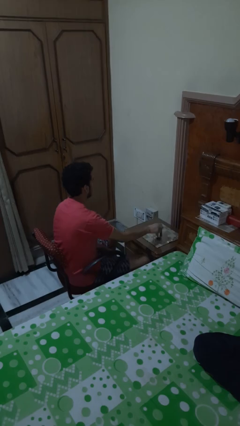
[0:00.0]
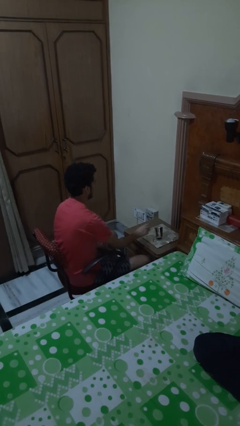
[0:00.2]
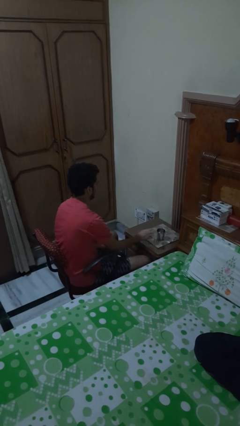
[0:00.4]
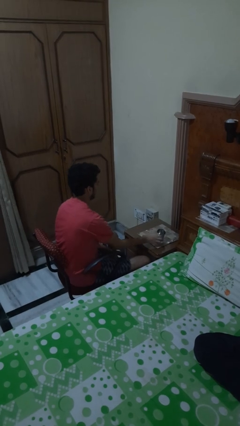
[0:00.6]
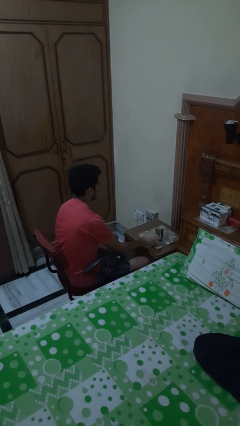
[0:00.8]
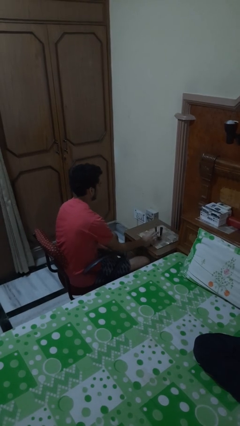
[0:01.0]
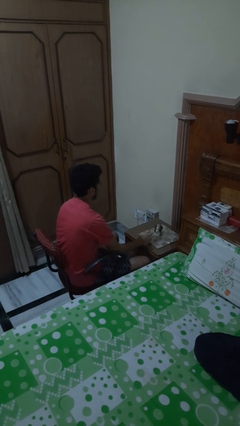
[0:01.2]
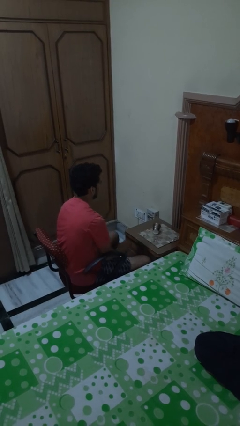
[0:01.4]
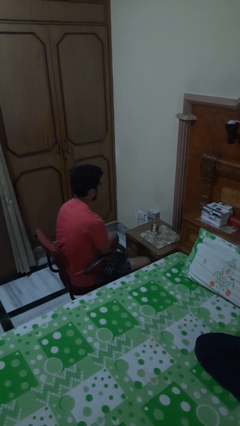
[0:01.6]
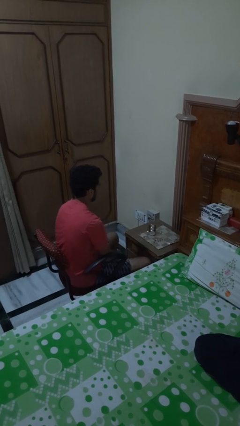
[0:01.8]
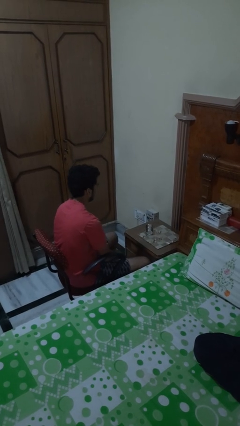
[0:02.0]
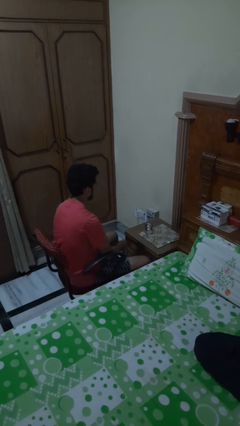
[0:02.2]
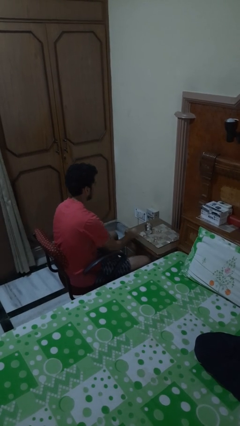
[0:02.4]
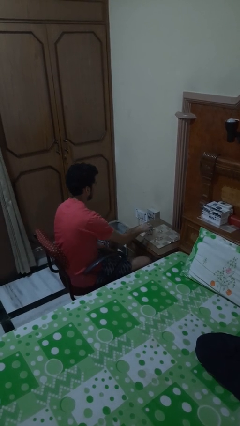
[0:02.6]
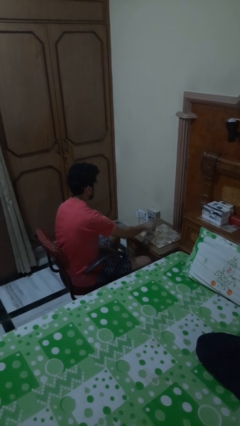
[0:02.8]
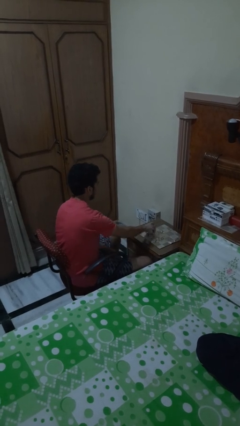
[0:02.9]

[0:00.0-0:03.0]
person knocks over glass

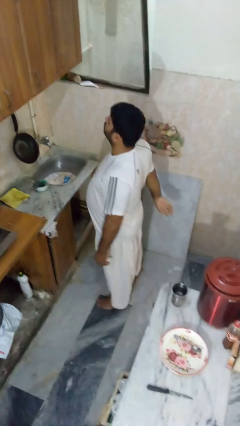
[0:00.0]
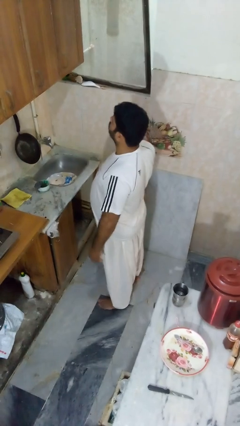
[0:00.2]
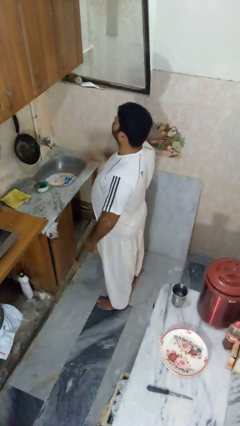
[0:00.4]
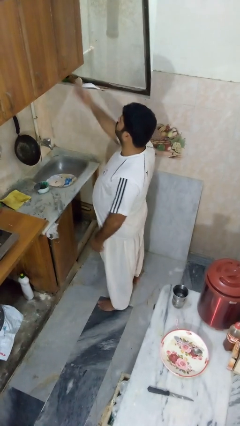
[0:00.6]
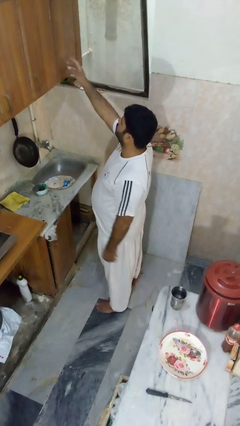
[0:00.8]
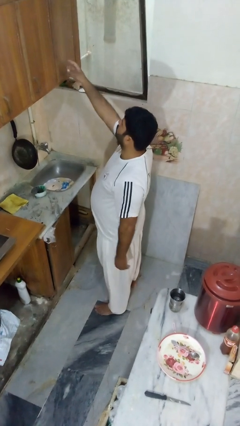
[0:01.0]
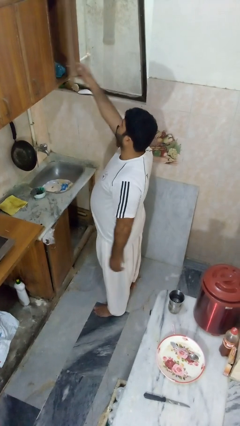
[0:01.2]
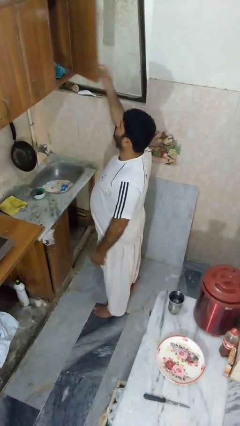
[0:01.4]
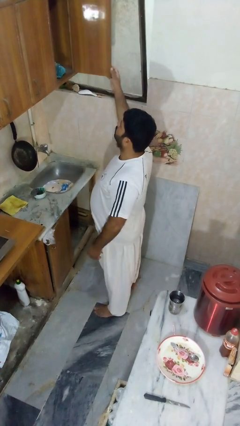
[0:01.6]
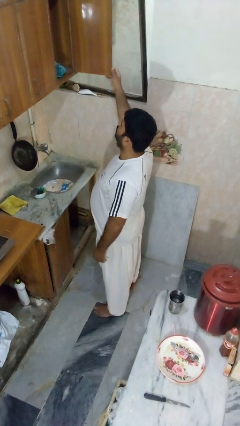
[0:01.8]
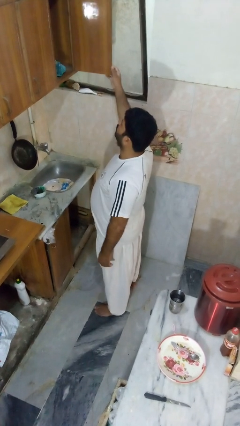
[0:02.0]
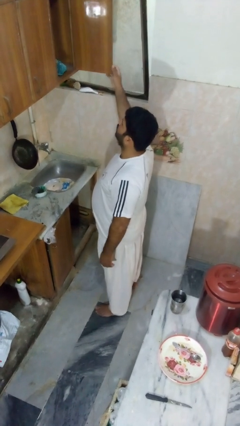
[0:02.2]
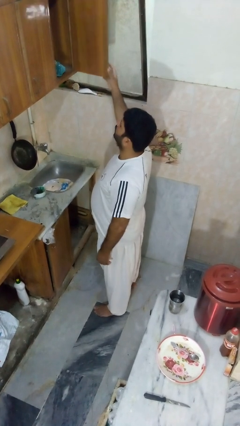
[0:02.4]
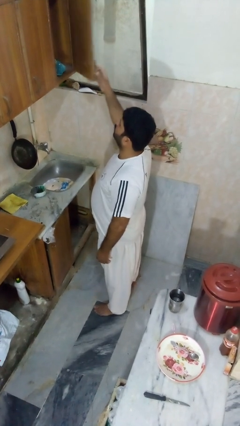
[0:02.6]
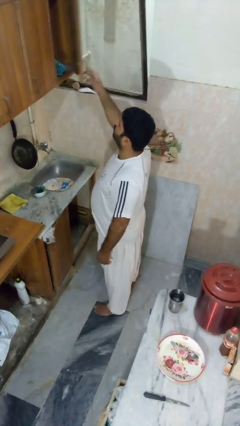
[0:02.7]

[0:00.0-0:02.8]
person opens cabinet

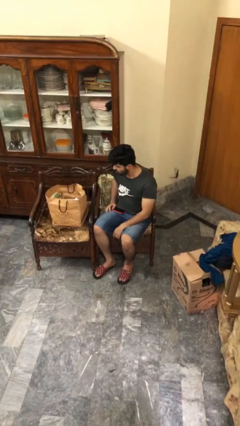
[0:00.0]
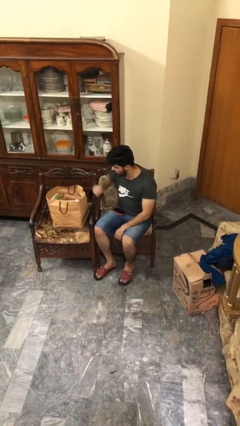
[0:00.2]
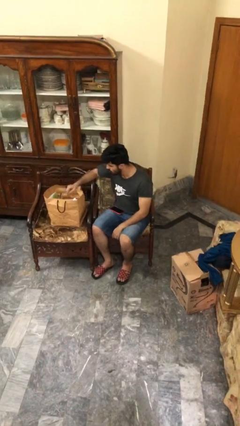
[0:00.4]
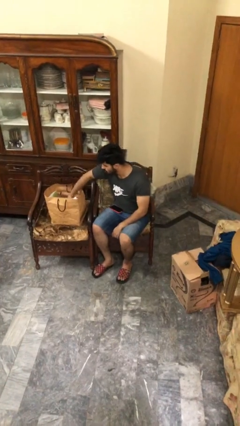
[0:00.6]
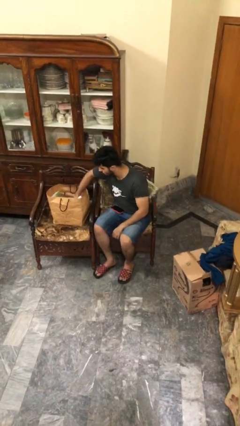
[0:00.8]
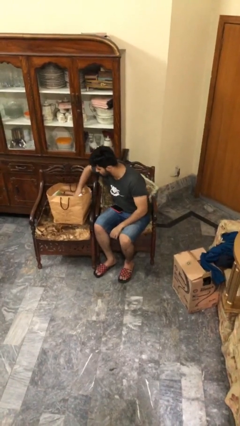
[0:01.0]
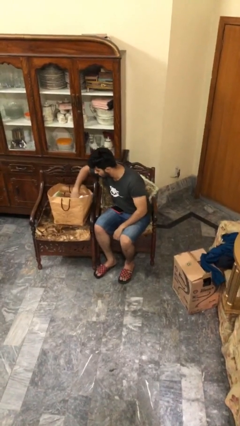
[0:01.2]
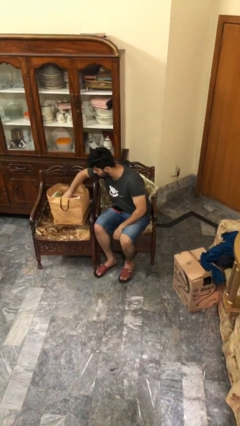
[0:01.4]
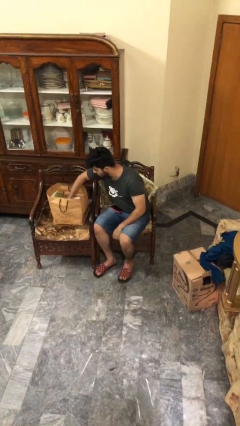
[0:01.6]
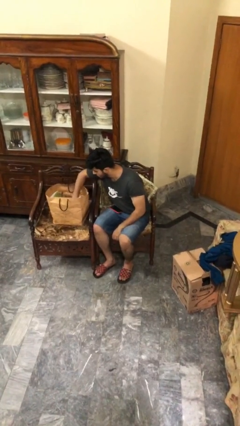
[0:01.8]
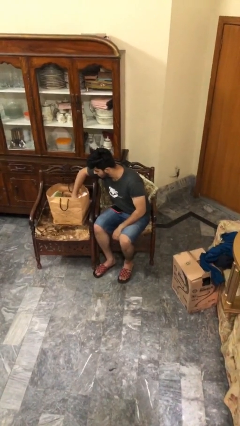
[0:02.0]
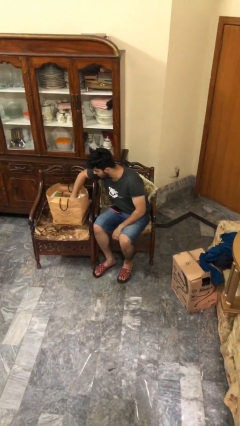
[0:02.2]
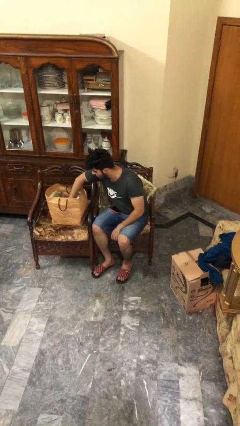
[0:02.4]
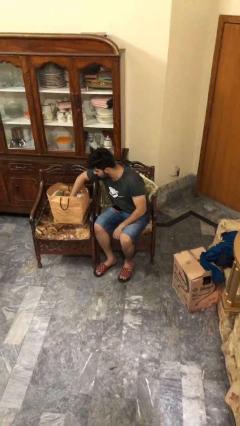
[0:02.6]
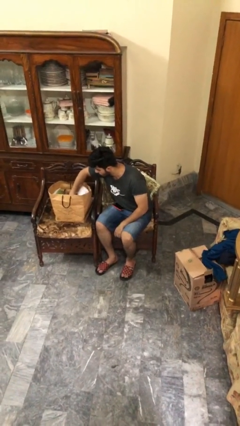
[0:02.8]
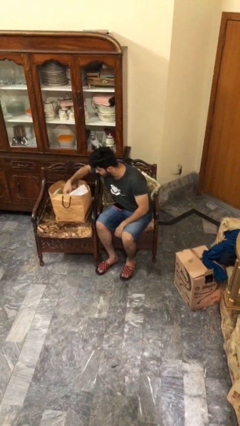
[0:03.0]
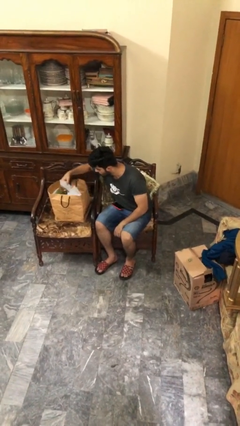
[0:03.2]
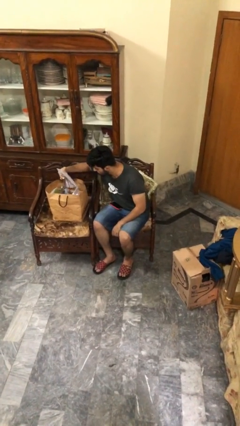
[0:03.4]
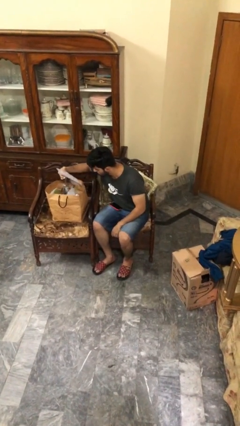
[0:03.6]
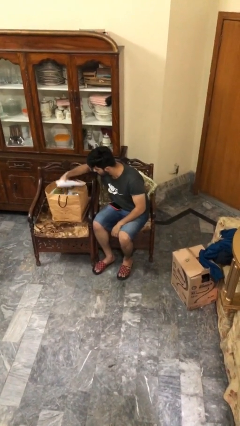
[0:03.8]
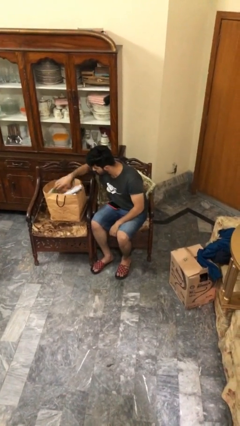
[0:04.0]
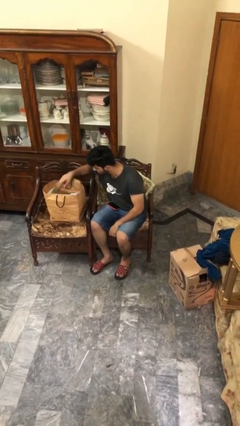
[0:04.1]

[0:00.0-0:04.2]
person searches in bag

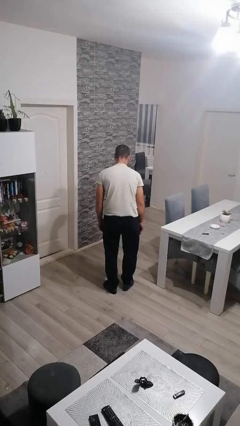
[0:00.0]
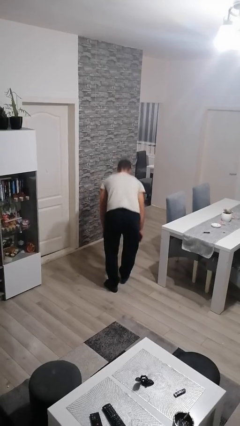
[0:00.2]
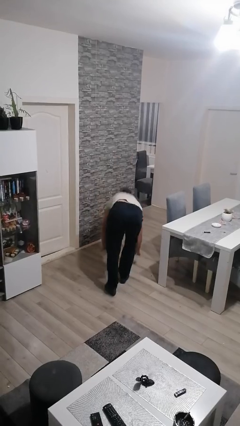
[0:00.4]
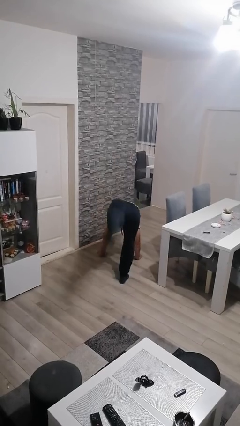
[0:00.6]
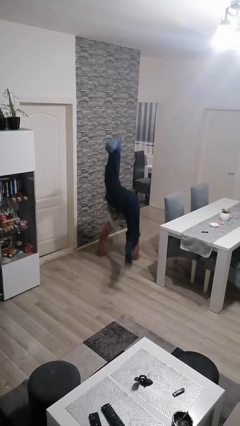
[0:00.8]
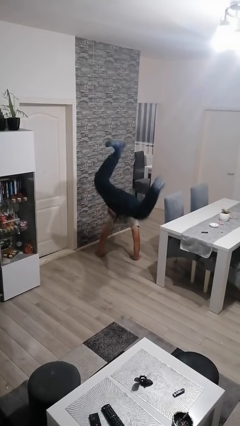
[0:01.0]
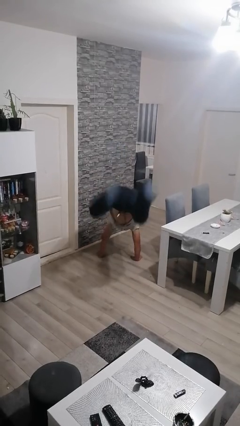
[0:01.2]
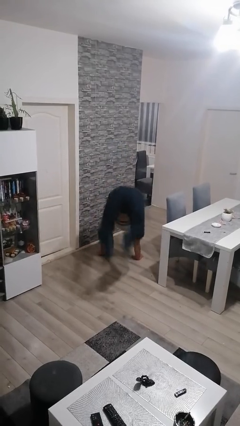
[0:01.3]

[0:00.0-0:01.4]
person handstand

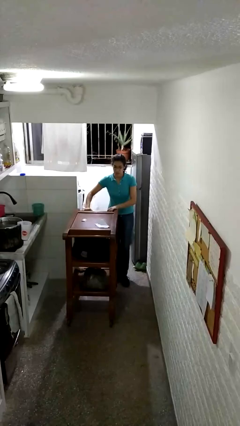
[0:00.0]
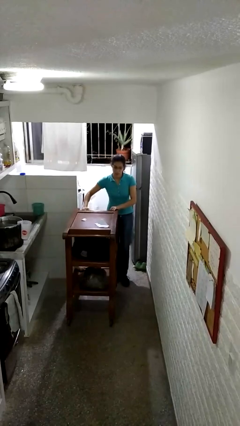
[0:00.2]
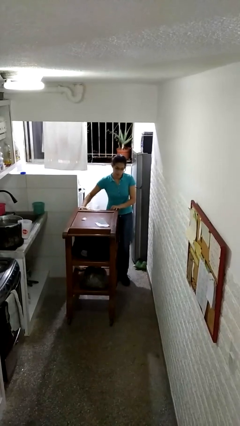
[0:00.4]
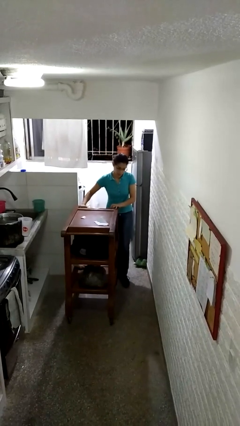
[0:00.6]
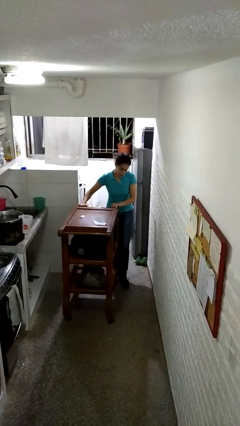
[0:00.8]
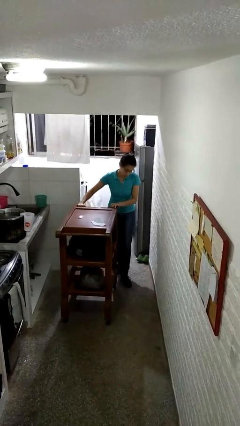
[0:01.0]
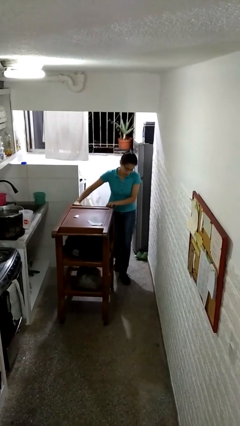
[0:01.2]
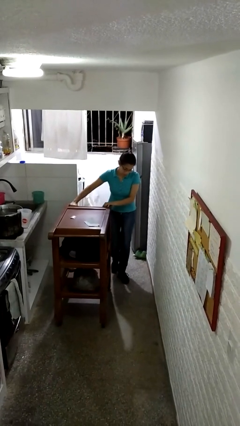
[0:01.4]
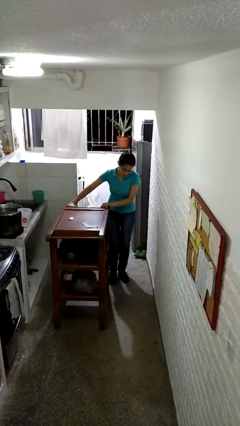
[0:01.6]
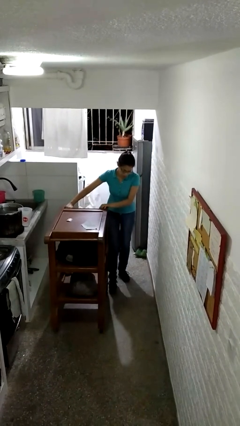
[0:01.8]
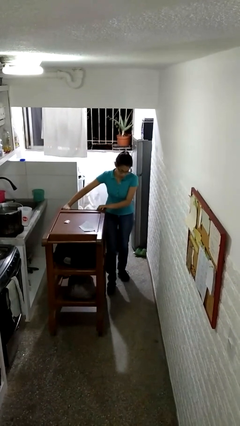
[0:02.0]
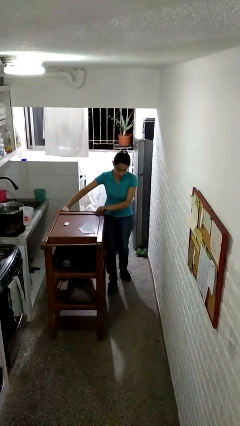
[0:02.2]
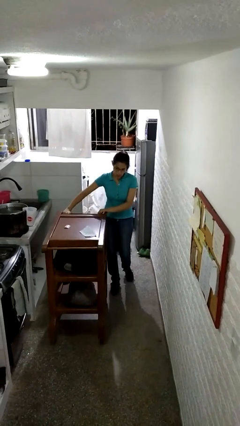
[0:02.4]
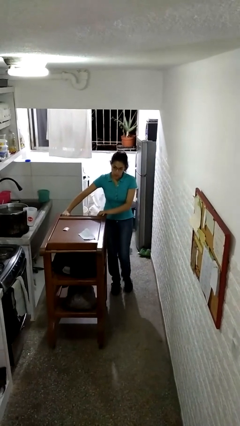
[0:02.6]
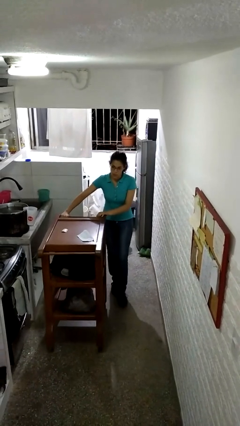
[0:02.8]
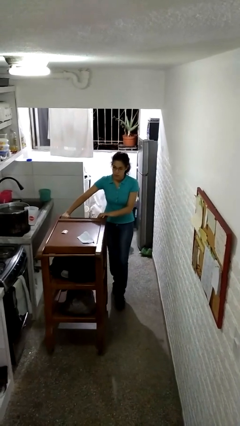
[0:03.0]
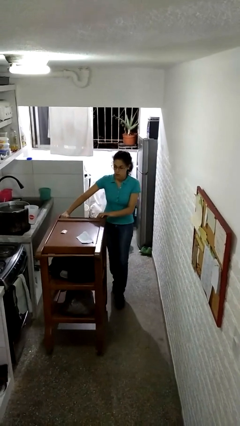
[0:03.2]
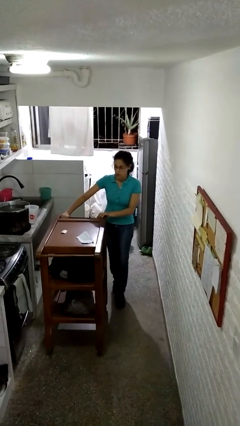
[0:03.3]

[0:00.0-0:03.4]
person pushes wheeled cart

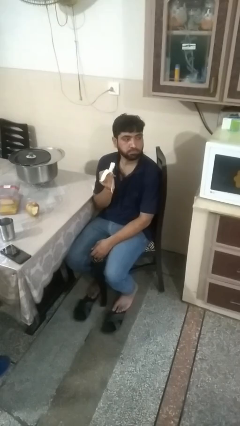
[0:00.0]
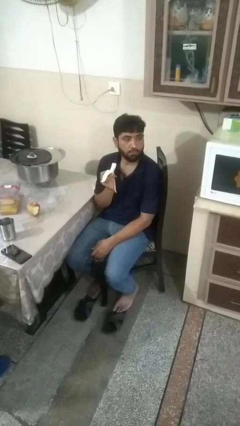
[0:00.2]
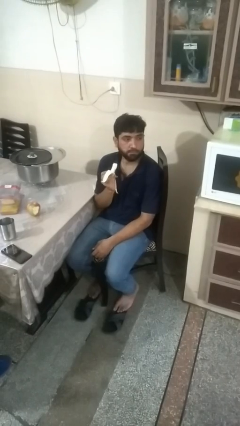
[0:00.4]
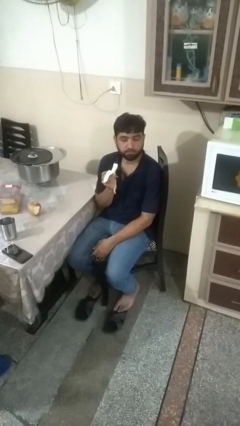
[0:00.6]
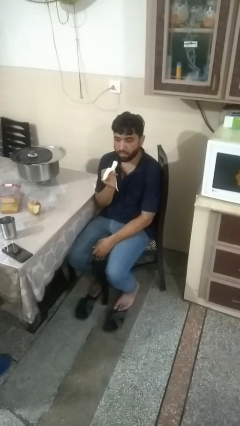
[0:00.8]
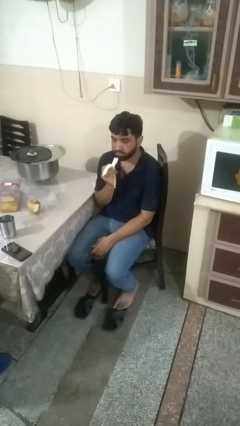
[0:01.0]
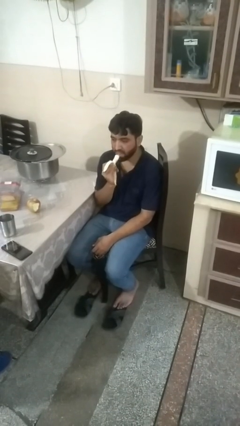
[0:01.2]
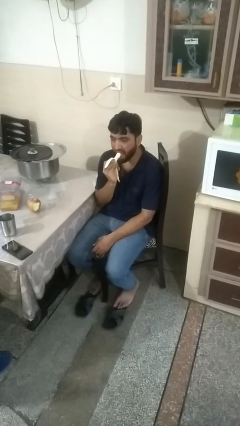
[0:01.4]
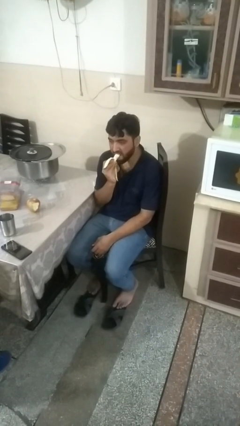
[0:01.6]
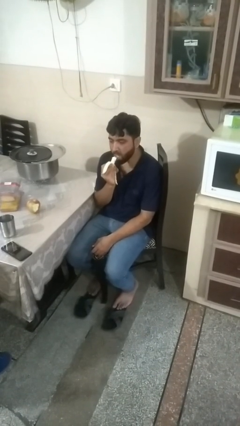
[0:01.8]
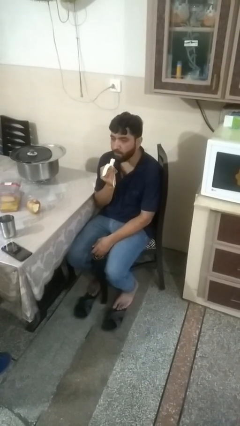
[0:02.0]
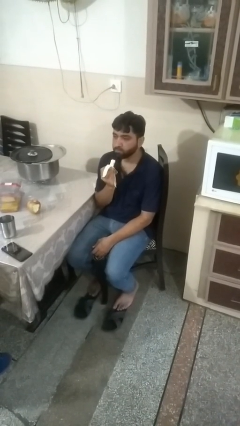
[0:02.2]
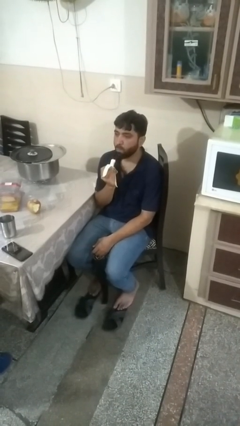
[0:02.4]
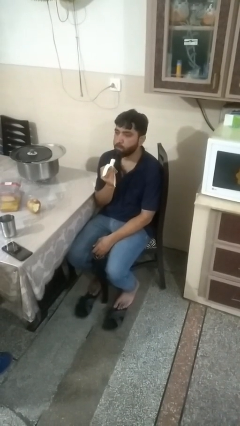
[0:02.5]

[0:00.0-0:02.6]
person eats banana
